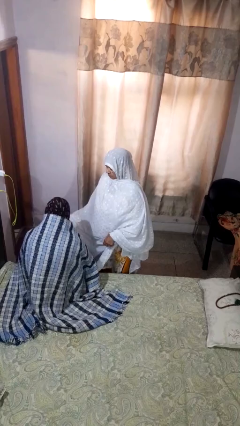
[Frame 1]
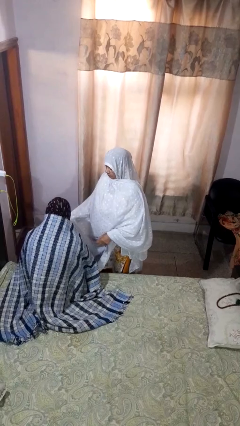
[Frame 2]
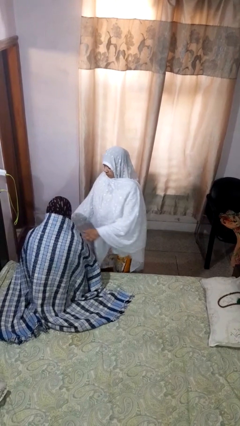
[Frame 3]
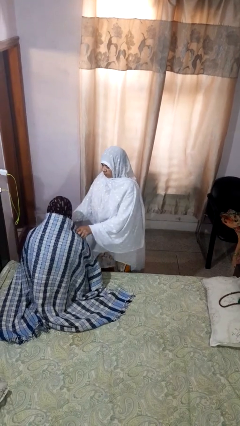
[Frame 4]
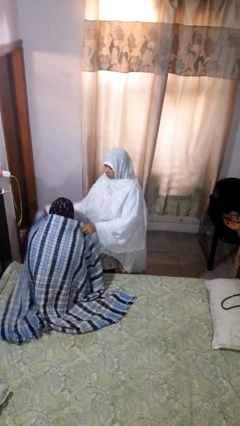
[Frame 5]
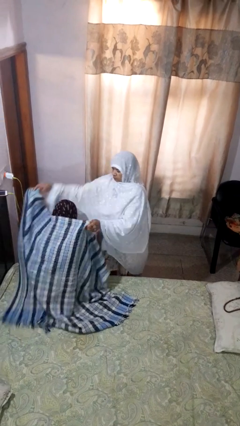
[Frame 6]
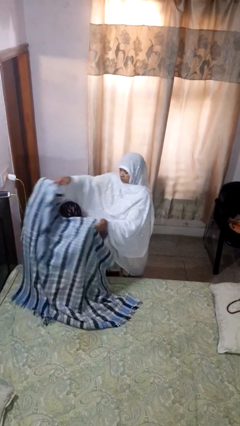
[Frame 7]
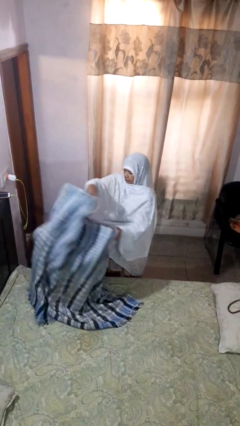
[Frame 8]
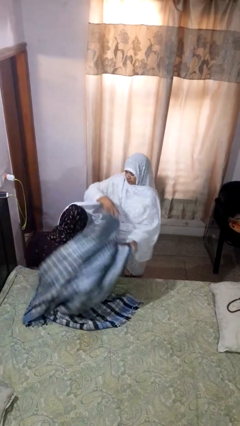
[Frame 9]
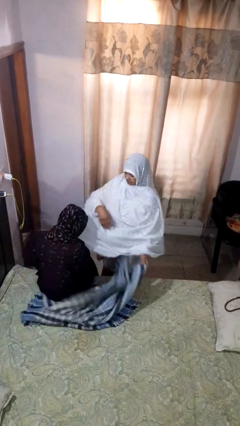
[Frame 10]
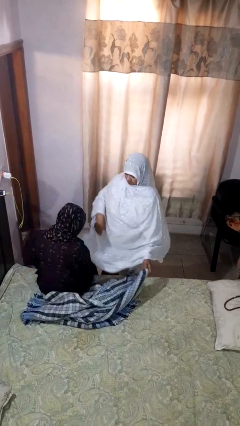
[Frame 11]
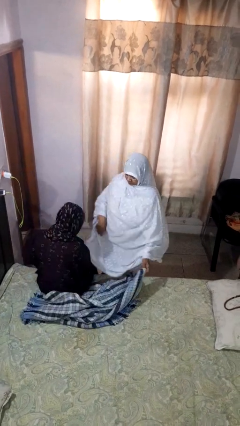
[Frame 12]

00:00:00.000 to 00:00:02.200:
person uncovers friend with blanket

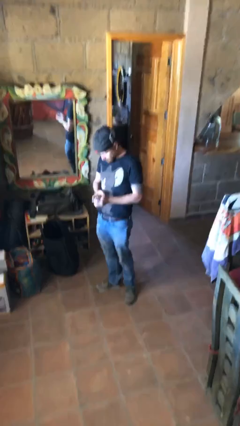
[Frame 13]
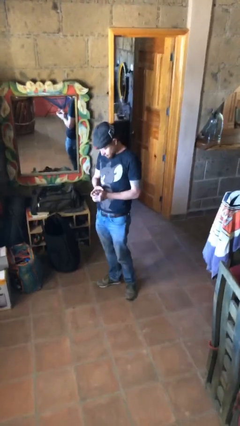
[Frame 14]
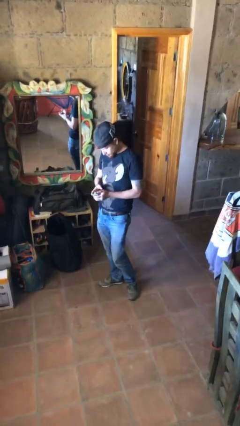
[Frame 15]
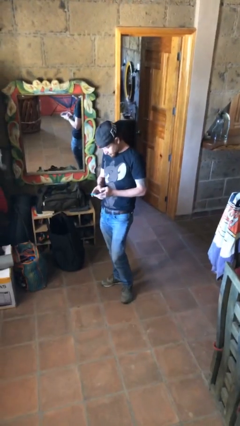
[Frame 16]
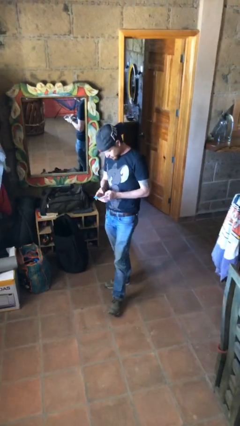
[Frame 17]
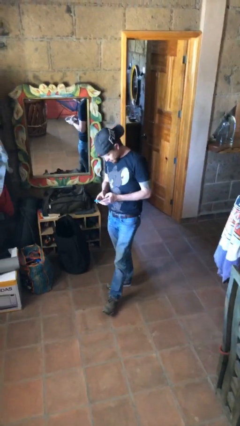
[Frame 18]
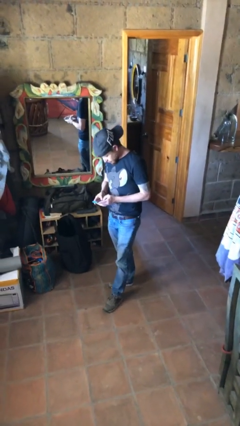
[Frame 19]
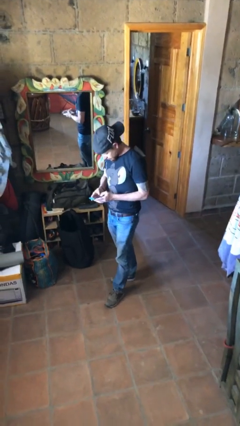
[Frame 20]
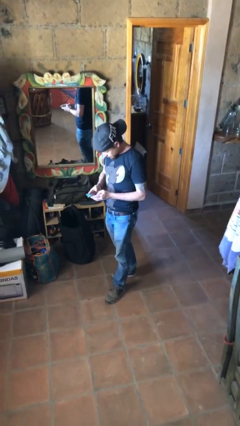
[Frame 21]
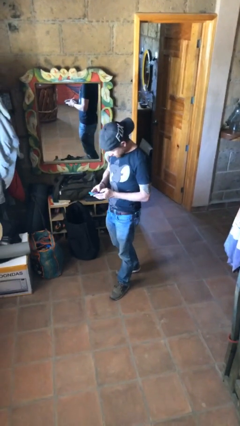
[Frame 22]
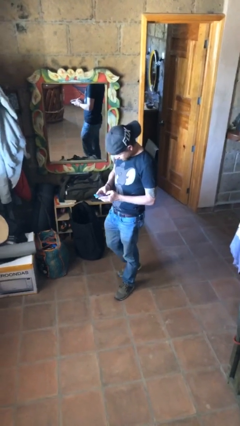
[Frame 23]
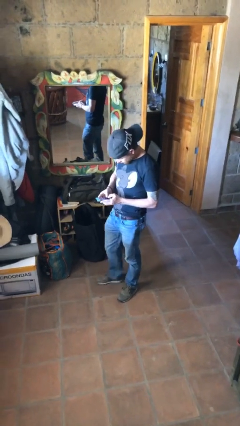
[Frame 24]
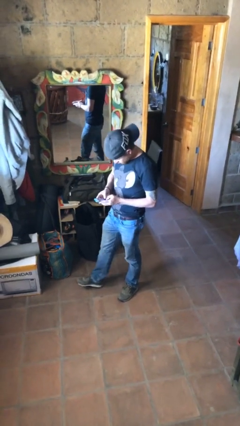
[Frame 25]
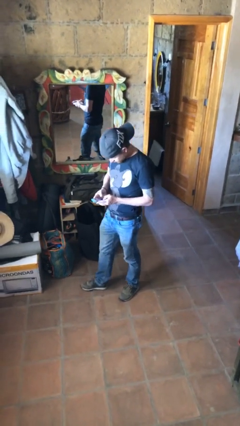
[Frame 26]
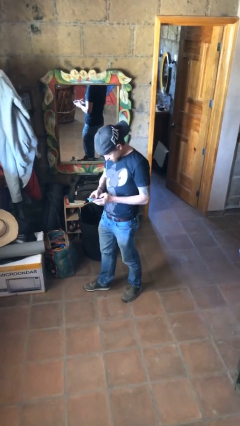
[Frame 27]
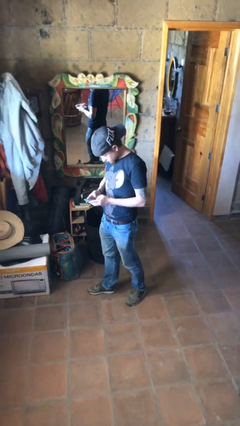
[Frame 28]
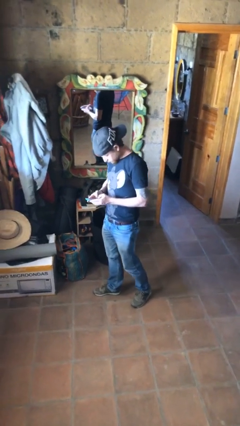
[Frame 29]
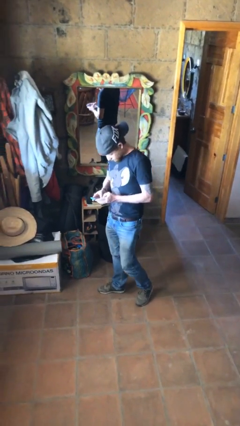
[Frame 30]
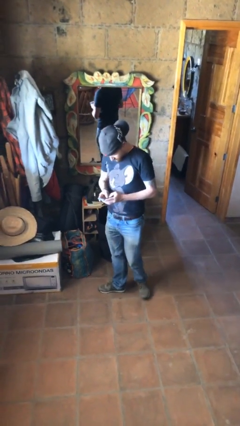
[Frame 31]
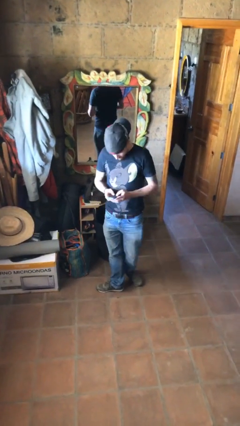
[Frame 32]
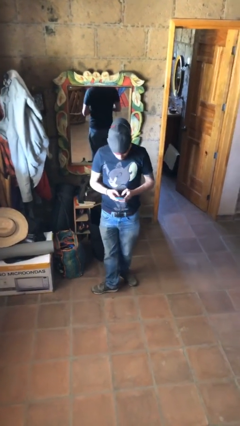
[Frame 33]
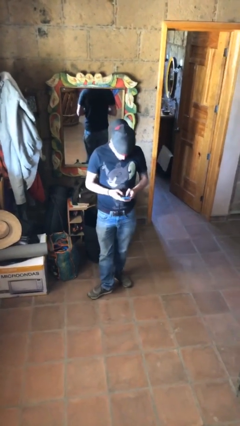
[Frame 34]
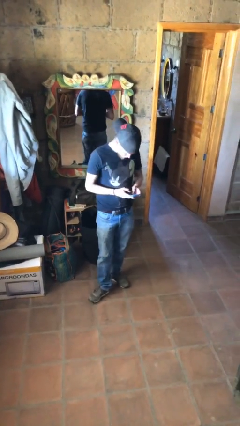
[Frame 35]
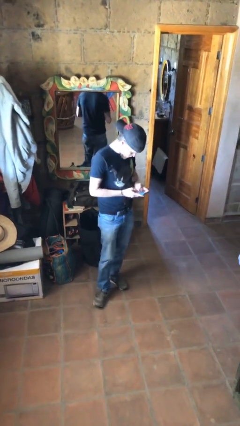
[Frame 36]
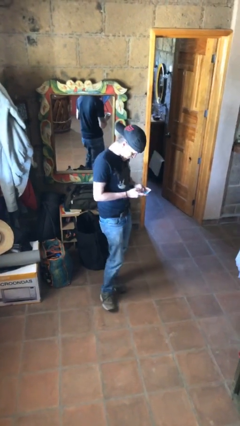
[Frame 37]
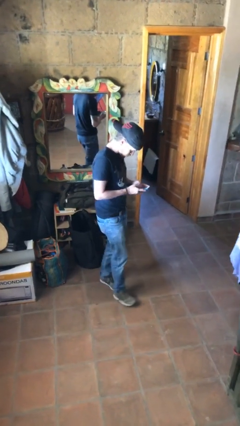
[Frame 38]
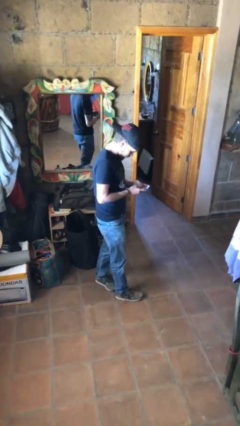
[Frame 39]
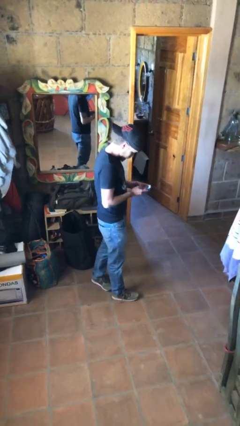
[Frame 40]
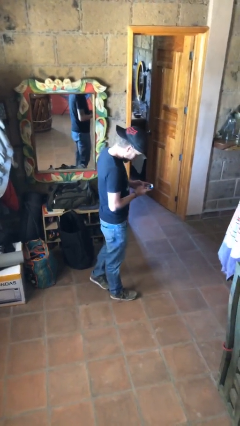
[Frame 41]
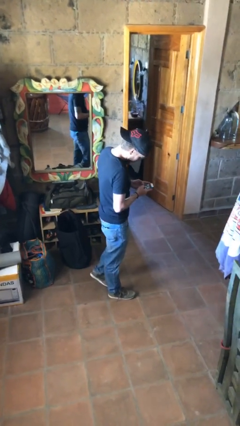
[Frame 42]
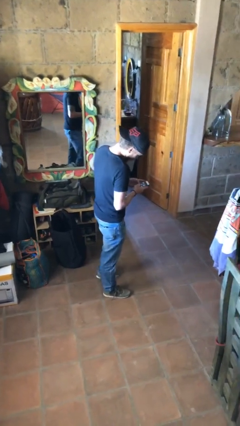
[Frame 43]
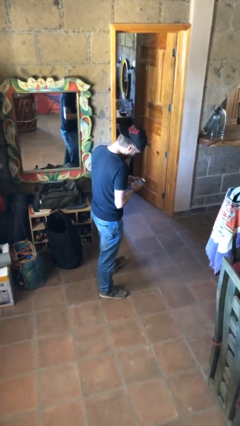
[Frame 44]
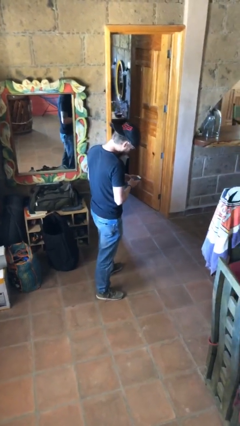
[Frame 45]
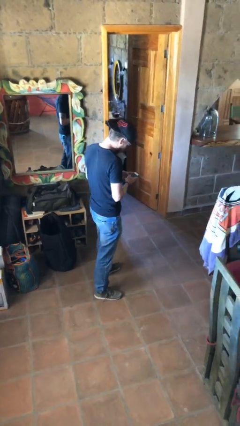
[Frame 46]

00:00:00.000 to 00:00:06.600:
person texts on phone

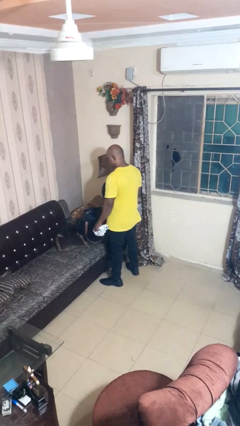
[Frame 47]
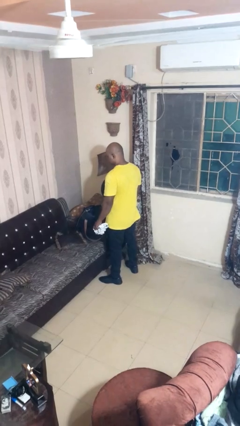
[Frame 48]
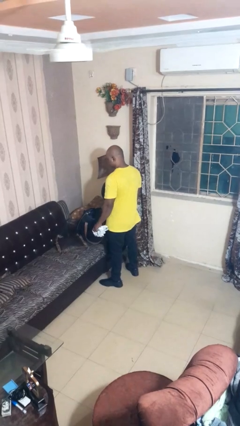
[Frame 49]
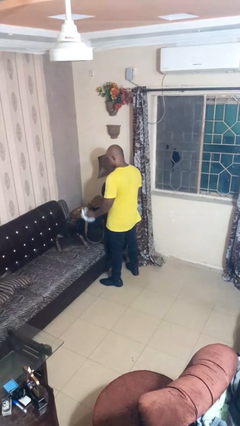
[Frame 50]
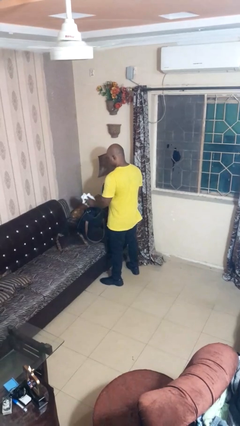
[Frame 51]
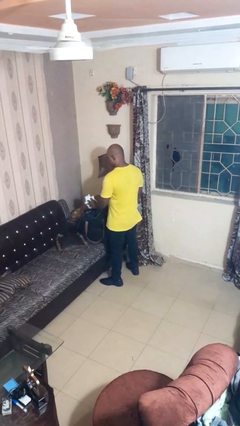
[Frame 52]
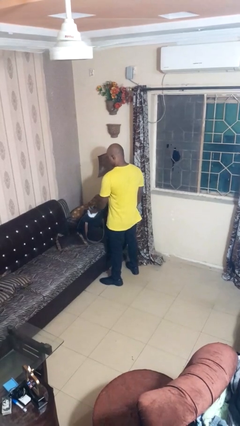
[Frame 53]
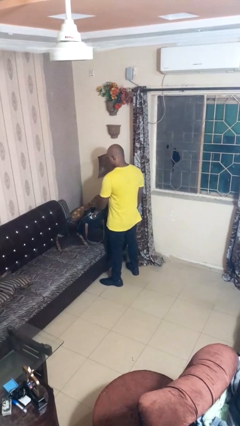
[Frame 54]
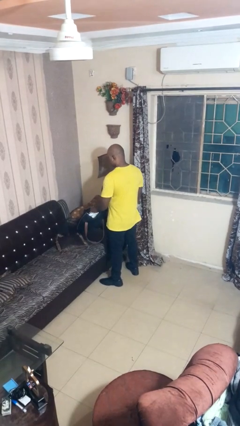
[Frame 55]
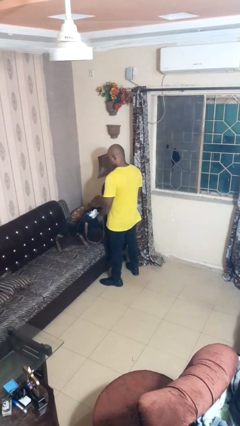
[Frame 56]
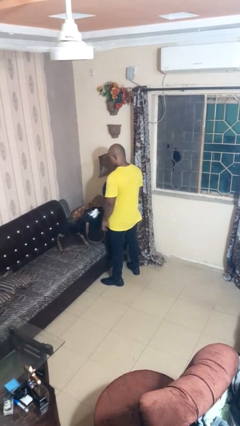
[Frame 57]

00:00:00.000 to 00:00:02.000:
person puts object into bag

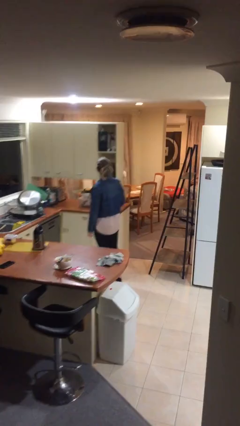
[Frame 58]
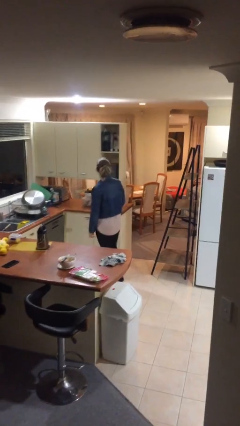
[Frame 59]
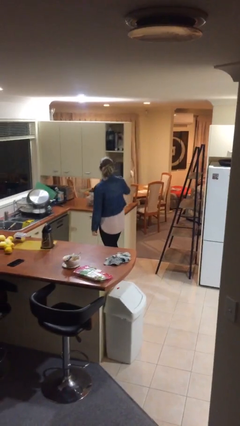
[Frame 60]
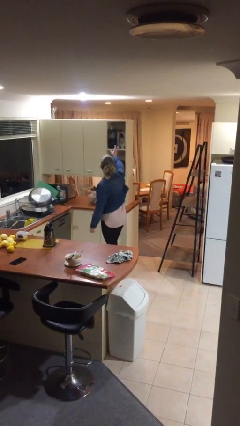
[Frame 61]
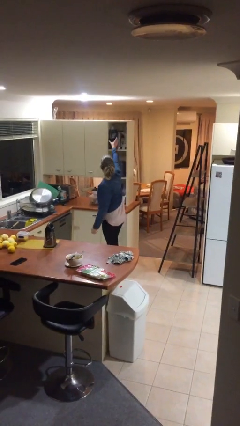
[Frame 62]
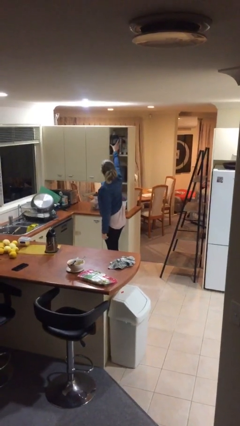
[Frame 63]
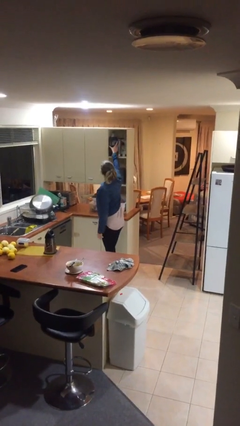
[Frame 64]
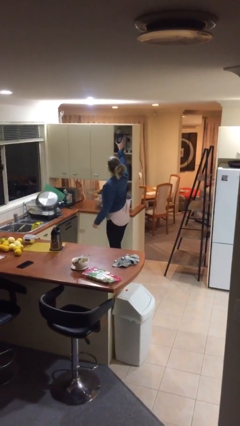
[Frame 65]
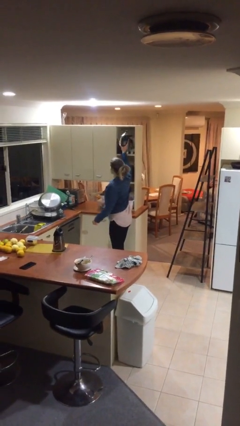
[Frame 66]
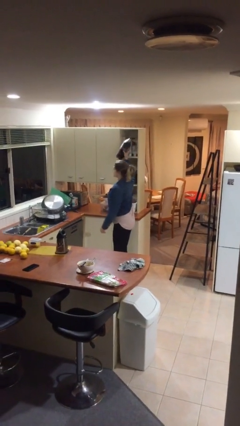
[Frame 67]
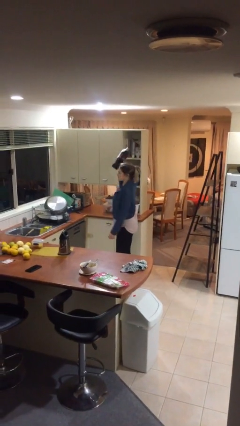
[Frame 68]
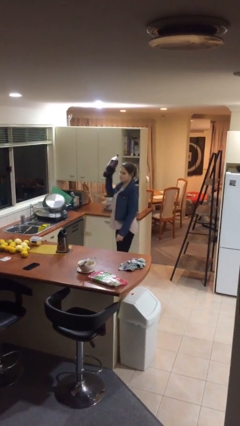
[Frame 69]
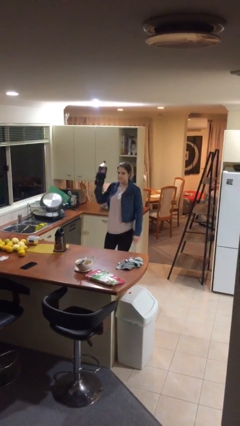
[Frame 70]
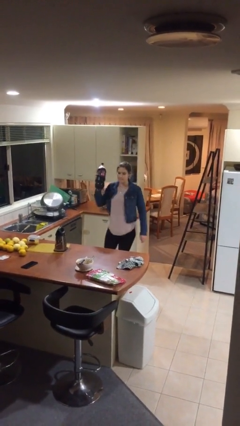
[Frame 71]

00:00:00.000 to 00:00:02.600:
person picks up object from shelf

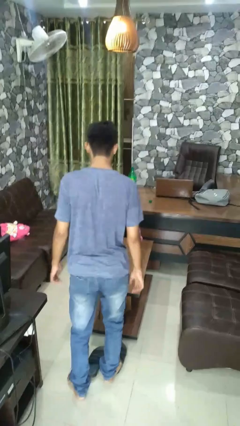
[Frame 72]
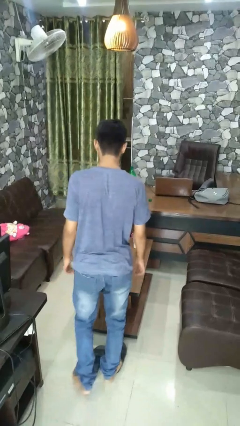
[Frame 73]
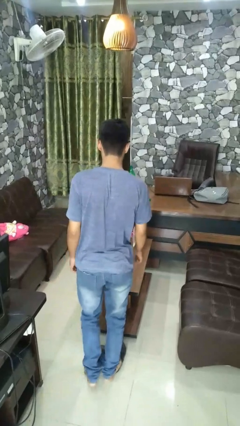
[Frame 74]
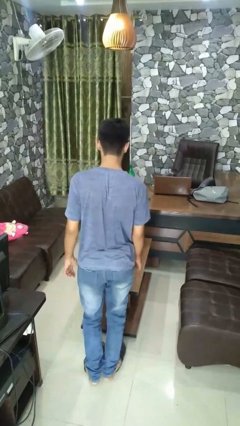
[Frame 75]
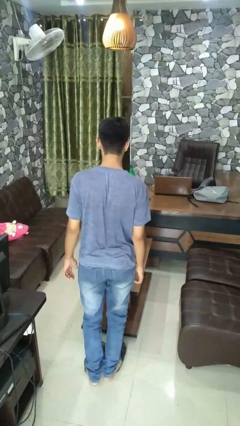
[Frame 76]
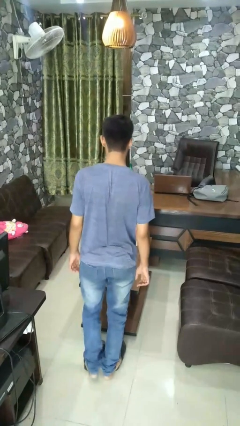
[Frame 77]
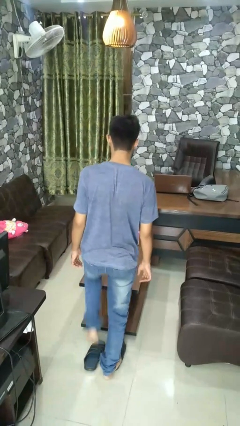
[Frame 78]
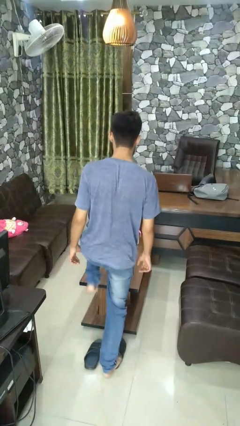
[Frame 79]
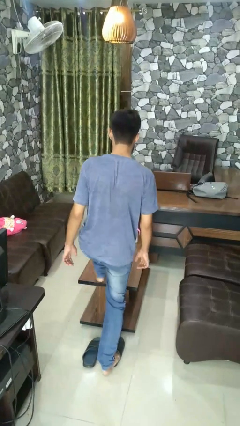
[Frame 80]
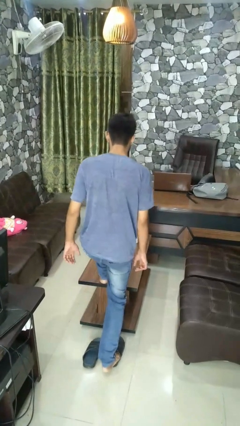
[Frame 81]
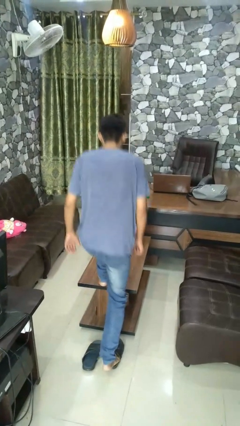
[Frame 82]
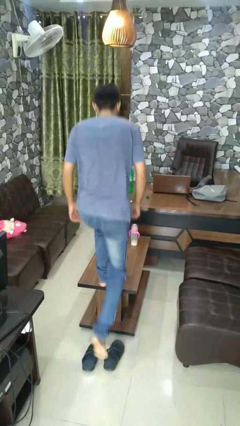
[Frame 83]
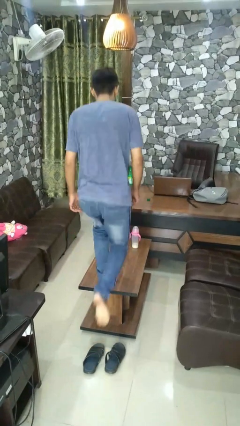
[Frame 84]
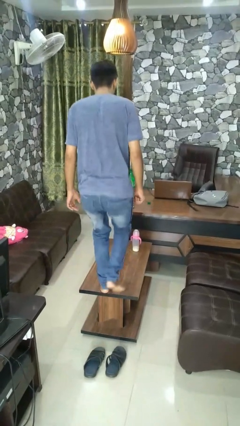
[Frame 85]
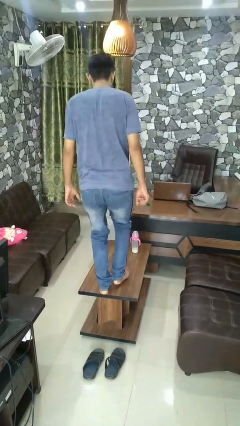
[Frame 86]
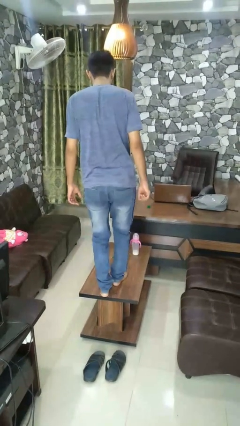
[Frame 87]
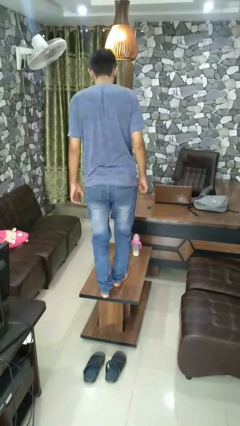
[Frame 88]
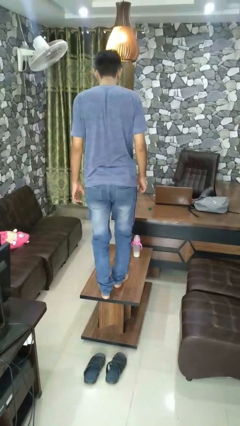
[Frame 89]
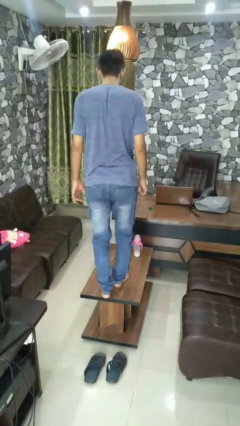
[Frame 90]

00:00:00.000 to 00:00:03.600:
person climbs on table

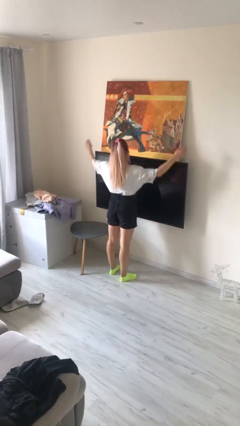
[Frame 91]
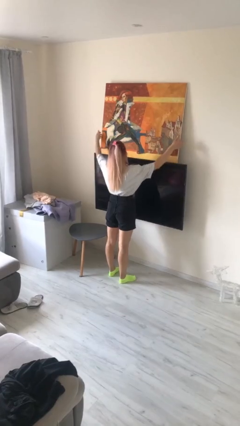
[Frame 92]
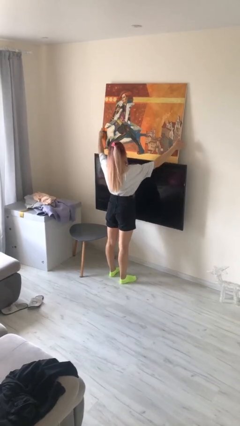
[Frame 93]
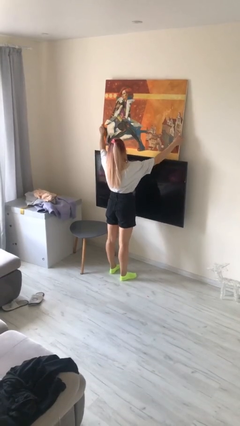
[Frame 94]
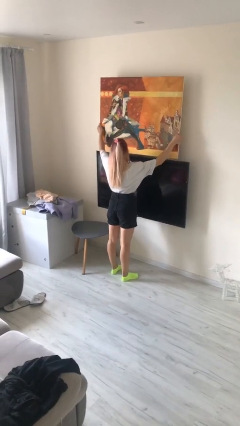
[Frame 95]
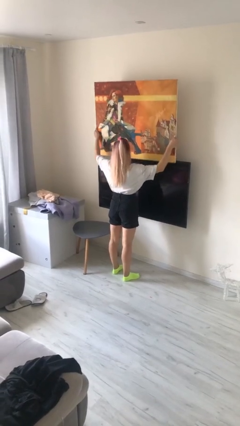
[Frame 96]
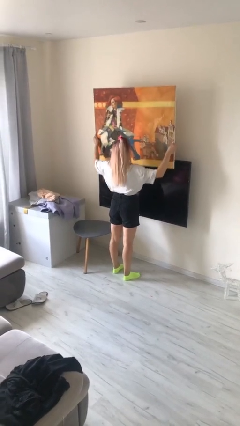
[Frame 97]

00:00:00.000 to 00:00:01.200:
person takes down picture frame
